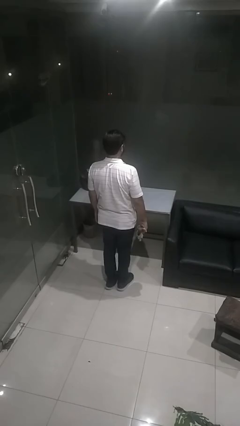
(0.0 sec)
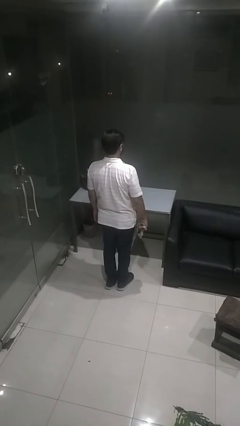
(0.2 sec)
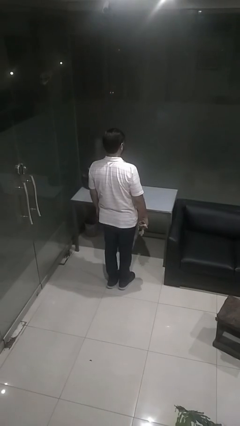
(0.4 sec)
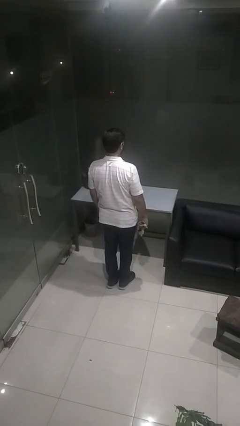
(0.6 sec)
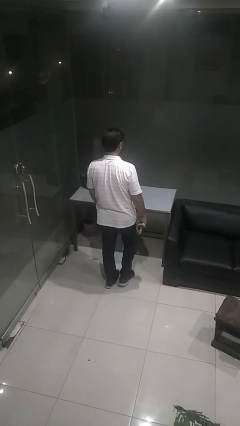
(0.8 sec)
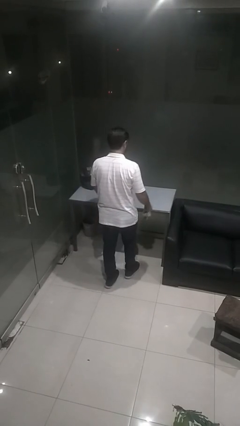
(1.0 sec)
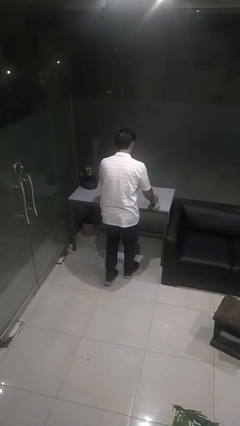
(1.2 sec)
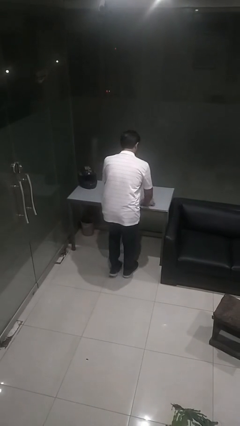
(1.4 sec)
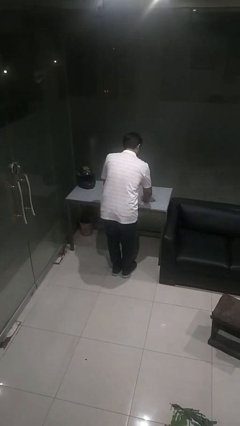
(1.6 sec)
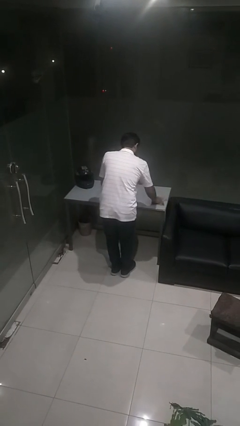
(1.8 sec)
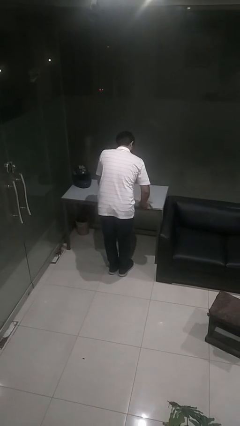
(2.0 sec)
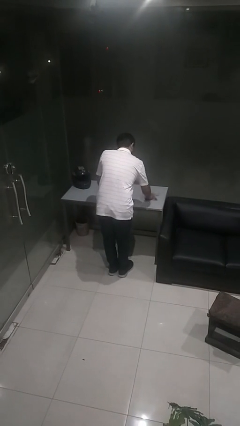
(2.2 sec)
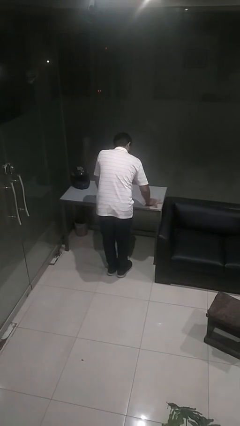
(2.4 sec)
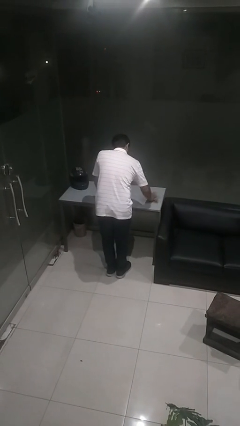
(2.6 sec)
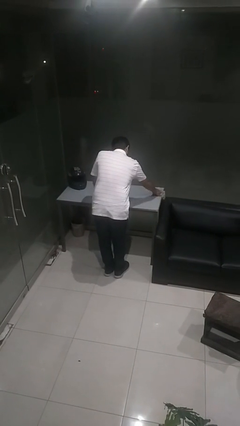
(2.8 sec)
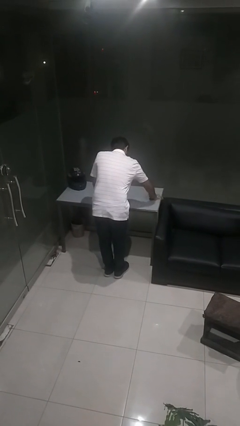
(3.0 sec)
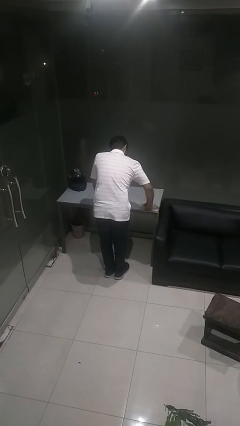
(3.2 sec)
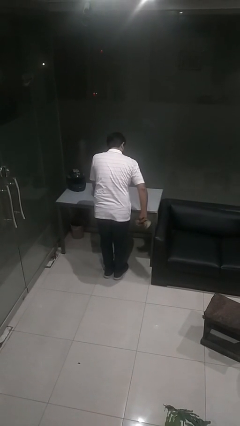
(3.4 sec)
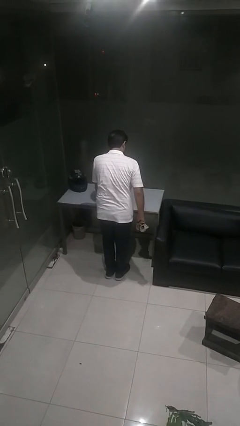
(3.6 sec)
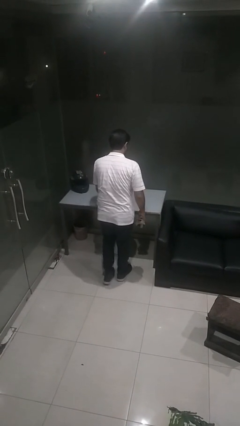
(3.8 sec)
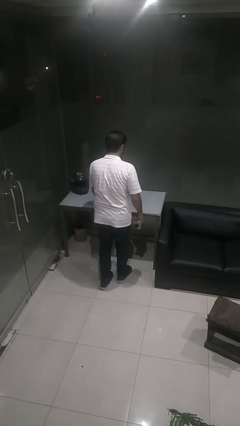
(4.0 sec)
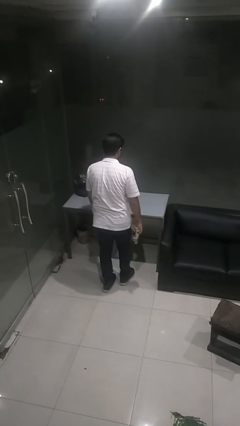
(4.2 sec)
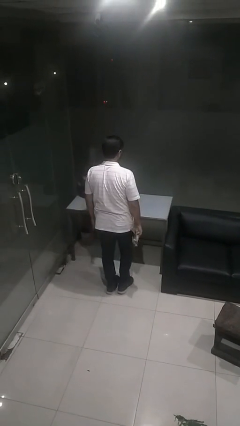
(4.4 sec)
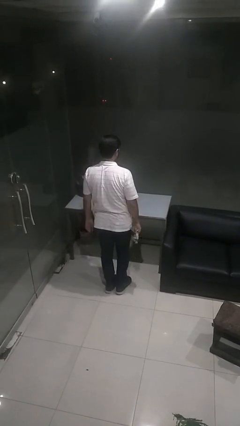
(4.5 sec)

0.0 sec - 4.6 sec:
person cleans table with rag

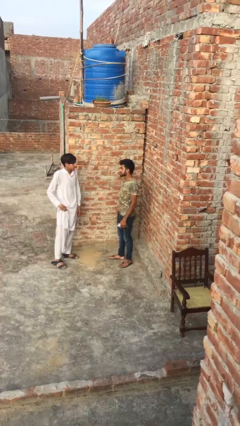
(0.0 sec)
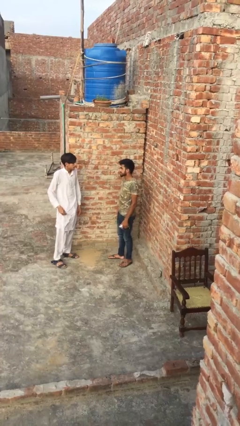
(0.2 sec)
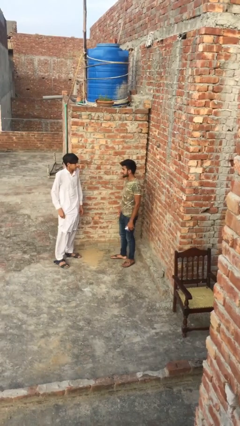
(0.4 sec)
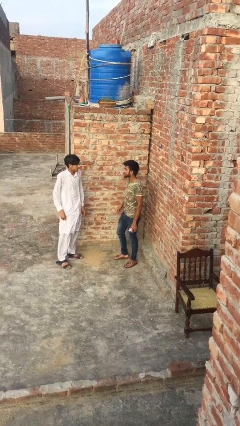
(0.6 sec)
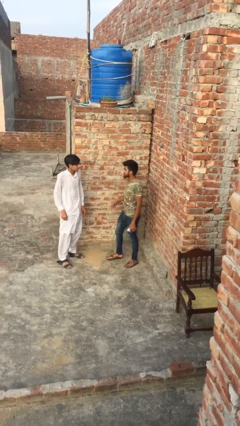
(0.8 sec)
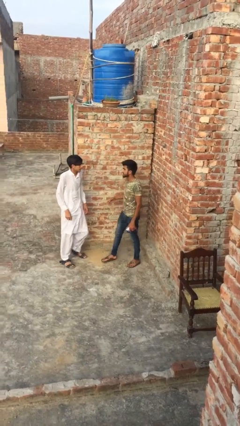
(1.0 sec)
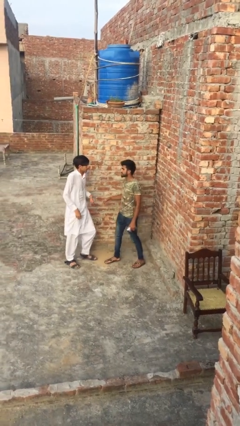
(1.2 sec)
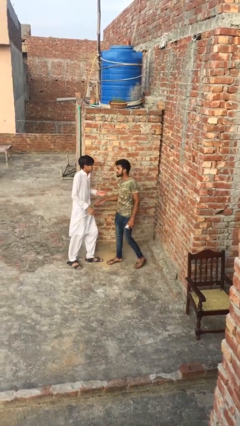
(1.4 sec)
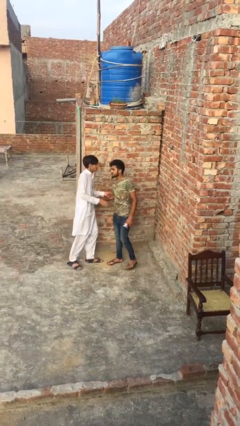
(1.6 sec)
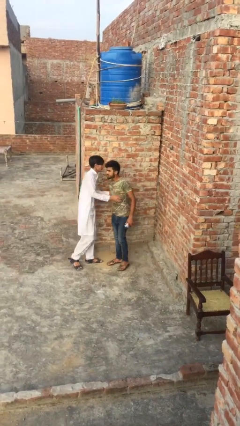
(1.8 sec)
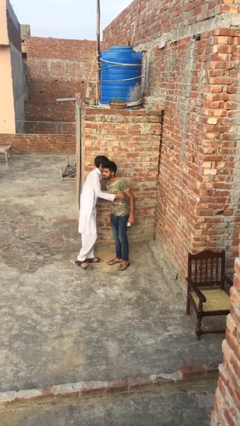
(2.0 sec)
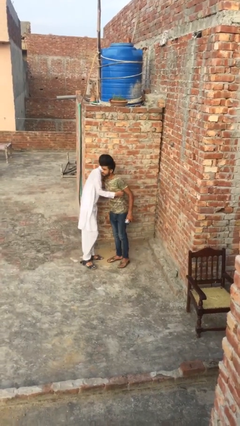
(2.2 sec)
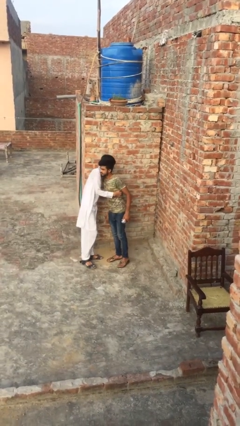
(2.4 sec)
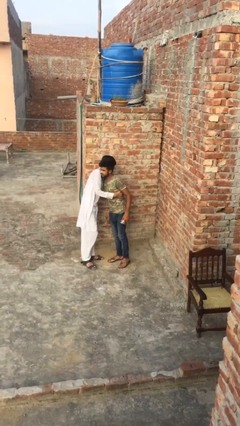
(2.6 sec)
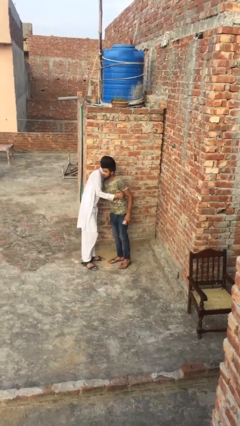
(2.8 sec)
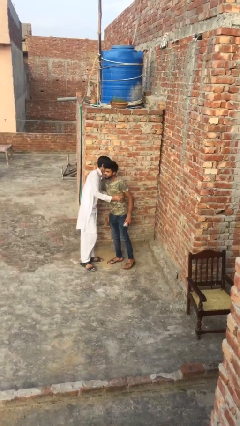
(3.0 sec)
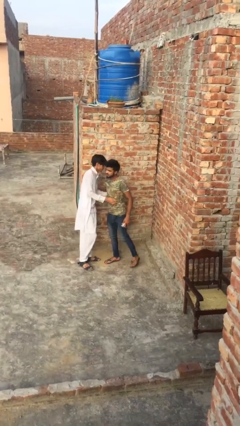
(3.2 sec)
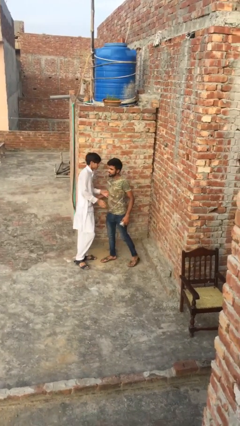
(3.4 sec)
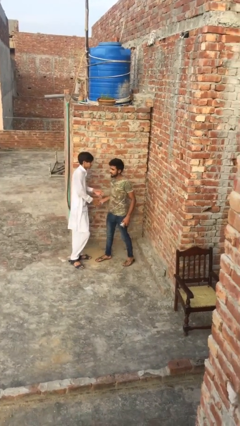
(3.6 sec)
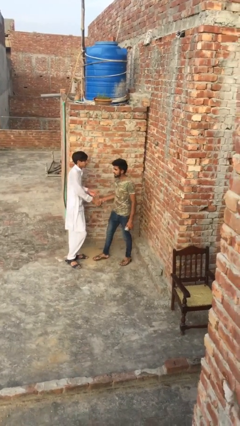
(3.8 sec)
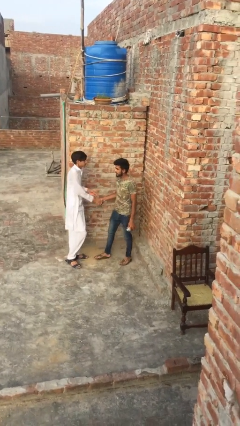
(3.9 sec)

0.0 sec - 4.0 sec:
person embraces person

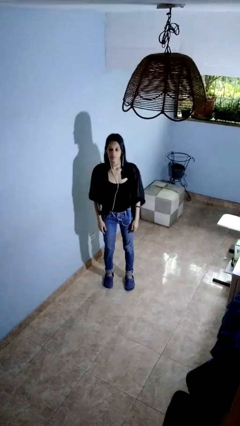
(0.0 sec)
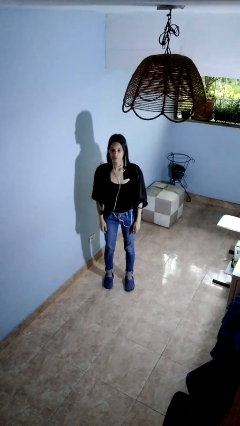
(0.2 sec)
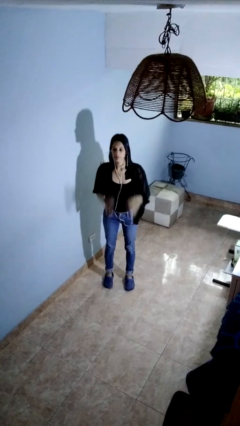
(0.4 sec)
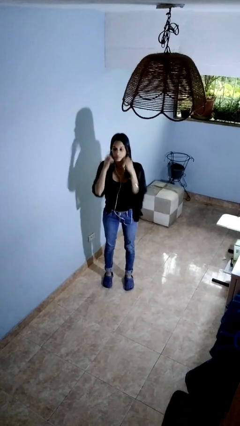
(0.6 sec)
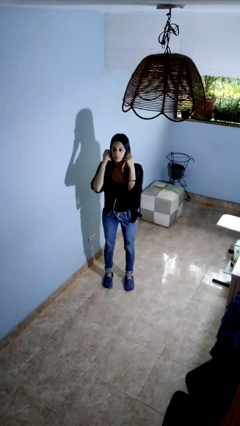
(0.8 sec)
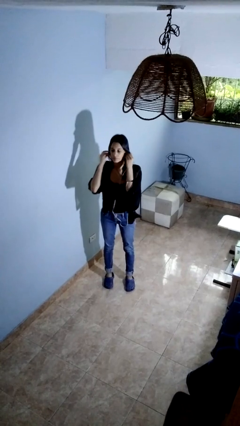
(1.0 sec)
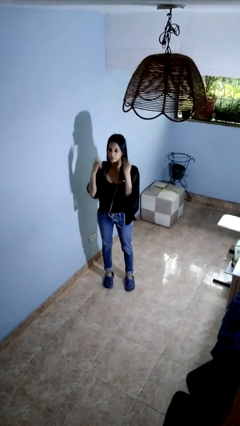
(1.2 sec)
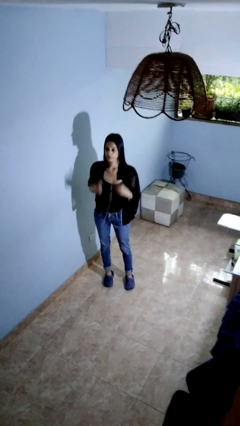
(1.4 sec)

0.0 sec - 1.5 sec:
person takes off headphones

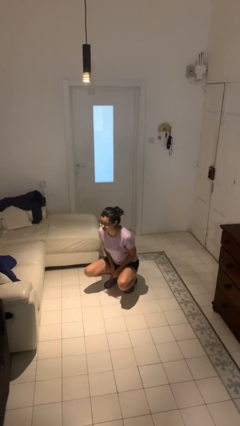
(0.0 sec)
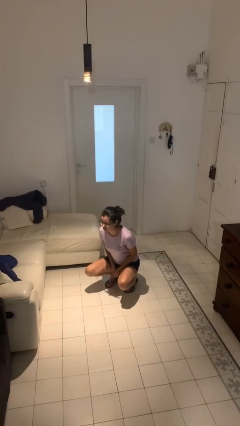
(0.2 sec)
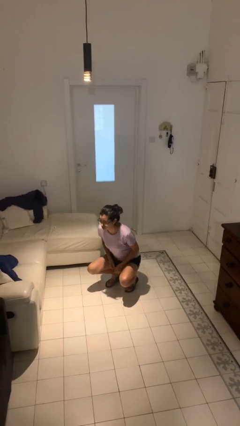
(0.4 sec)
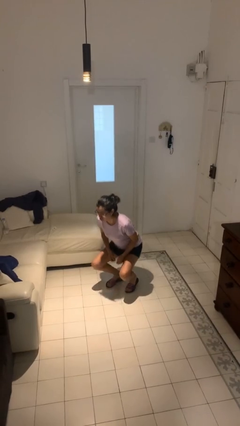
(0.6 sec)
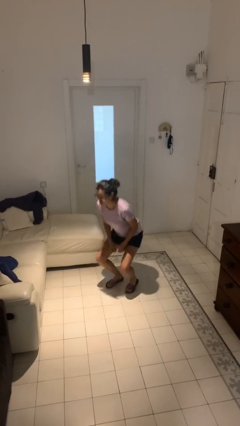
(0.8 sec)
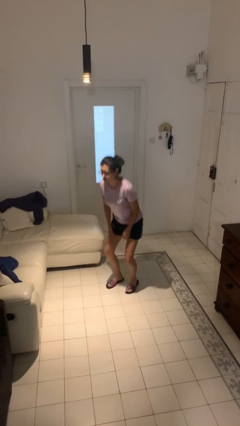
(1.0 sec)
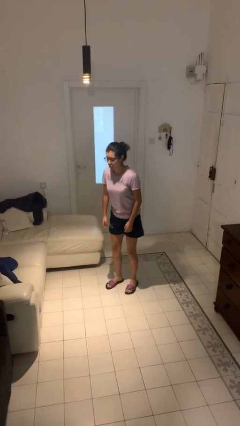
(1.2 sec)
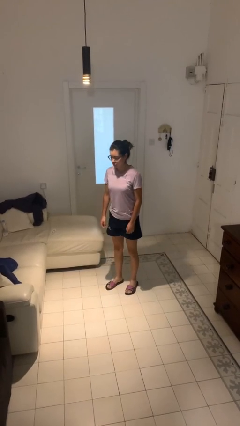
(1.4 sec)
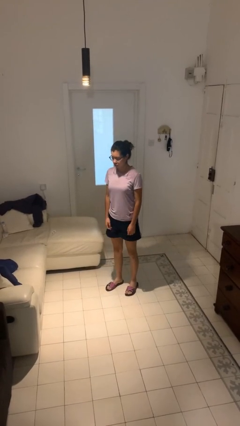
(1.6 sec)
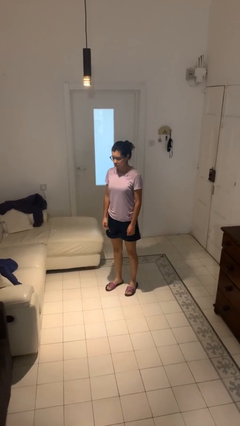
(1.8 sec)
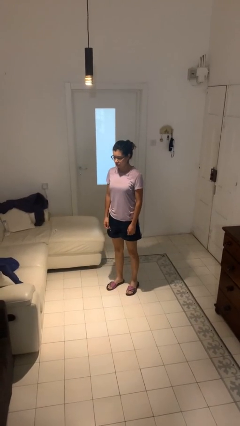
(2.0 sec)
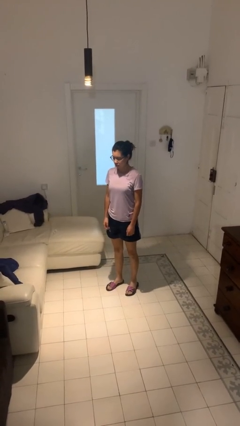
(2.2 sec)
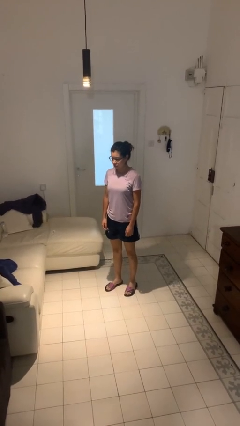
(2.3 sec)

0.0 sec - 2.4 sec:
person stands up

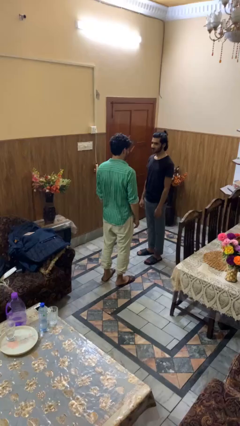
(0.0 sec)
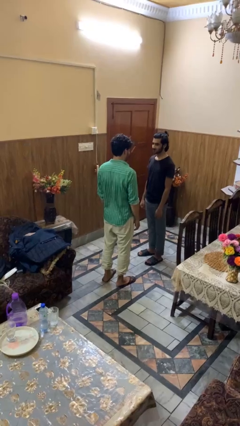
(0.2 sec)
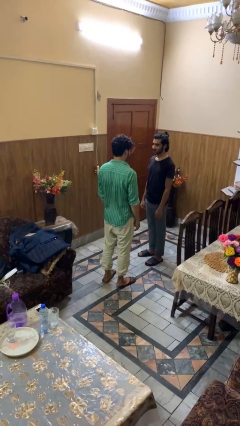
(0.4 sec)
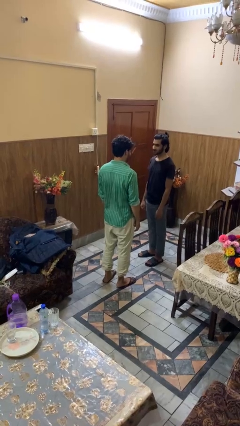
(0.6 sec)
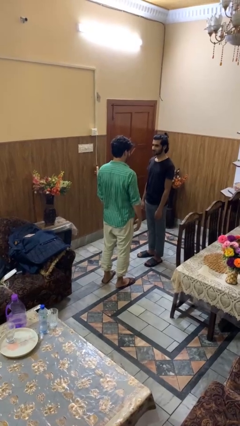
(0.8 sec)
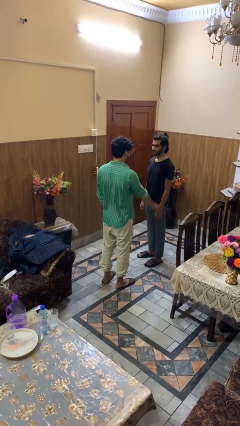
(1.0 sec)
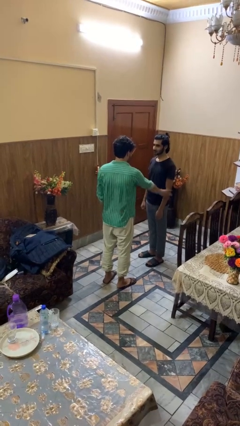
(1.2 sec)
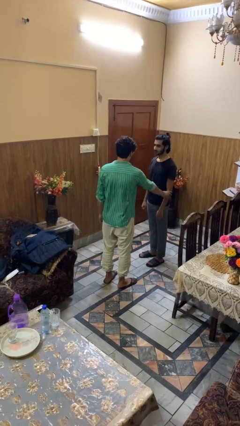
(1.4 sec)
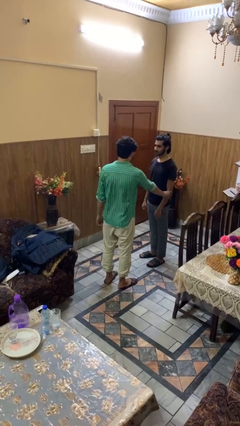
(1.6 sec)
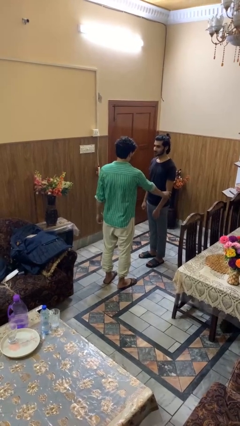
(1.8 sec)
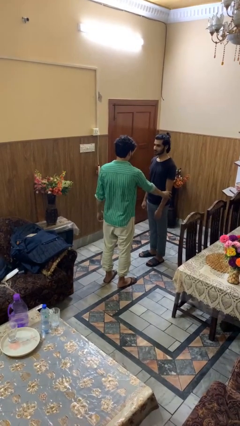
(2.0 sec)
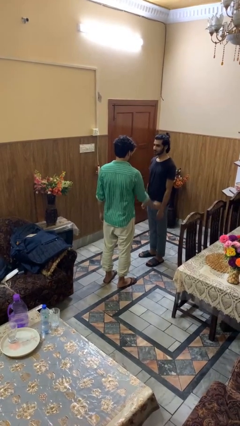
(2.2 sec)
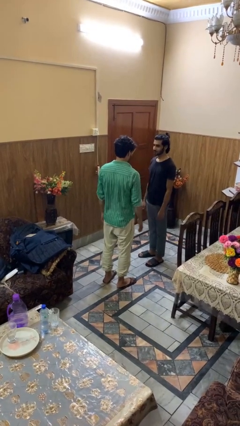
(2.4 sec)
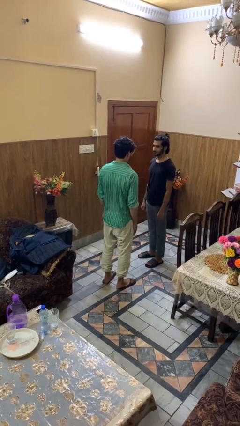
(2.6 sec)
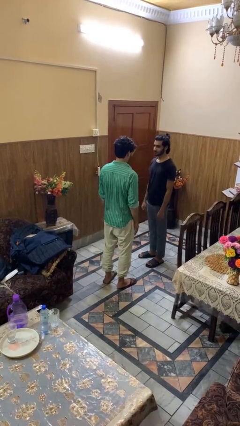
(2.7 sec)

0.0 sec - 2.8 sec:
person grabs person by forearm

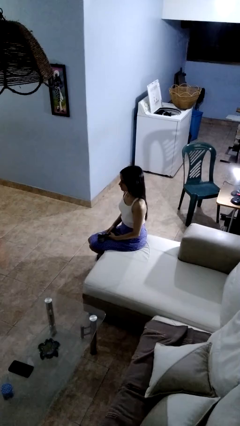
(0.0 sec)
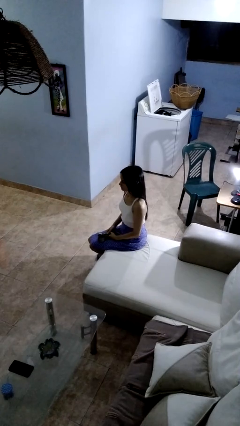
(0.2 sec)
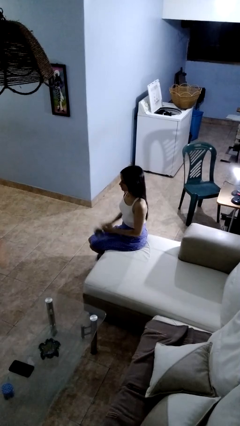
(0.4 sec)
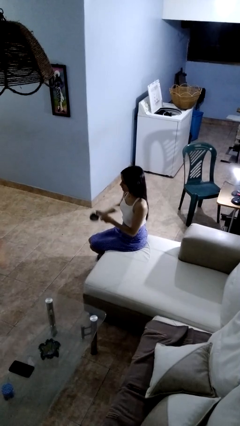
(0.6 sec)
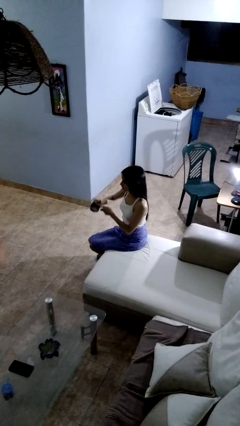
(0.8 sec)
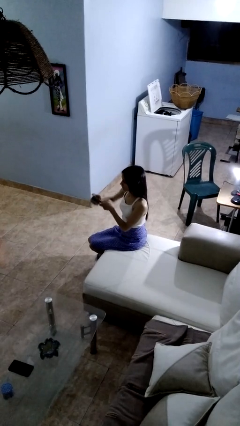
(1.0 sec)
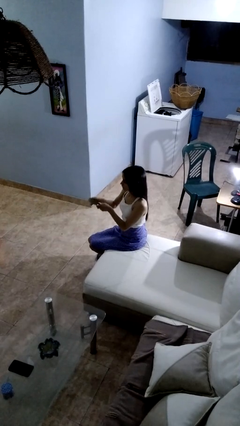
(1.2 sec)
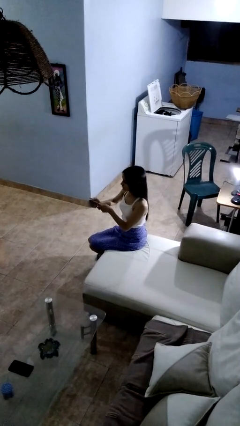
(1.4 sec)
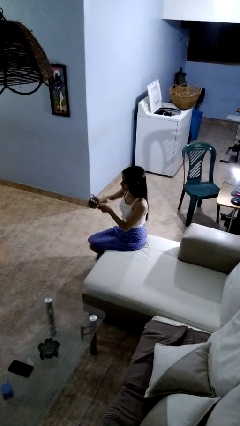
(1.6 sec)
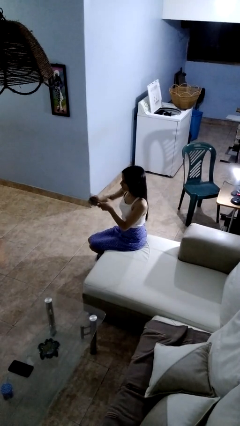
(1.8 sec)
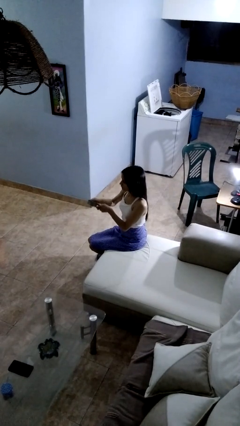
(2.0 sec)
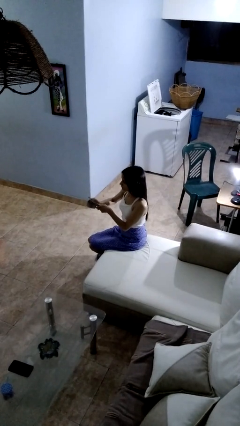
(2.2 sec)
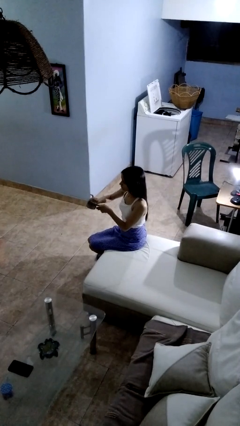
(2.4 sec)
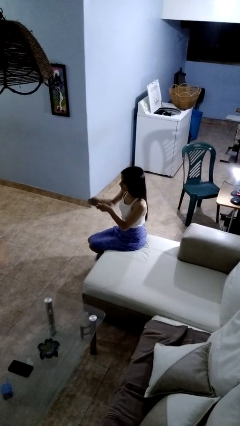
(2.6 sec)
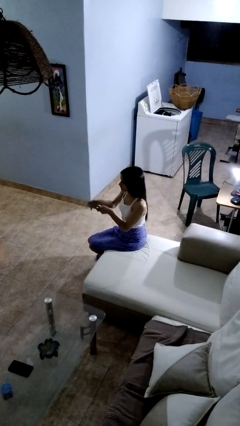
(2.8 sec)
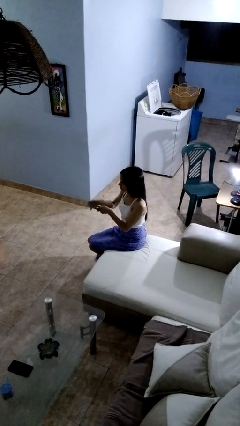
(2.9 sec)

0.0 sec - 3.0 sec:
person opens can with can opener
